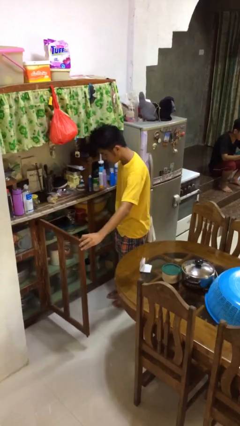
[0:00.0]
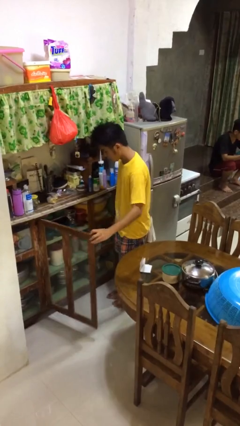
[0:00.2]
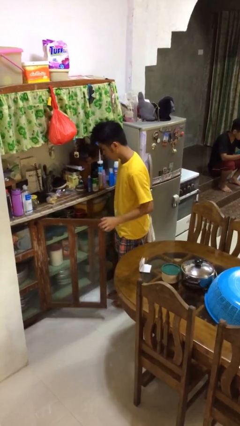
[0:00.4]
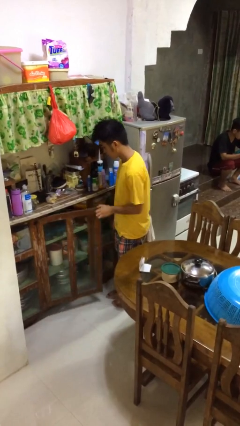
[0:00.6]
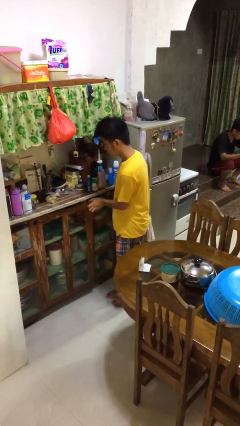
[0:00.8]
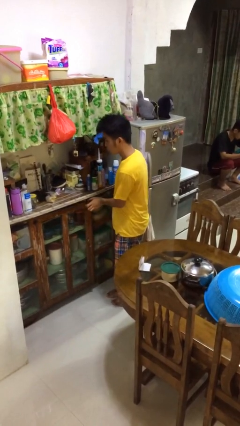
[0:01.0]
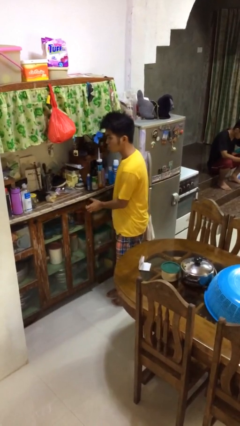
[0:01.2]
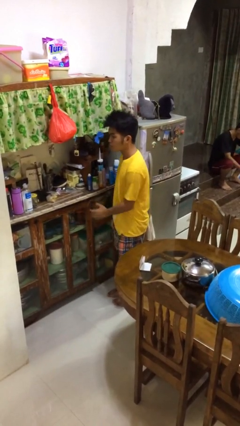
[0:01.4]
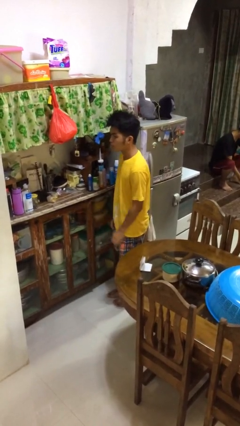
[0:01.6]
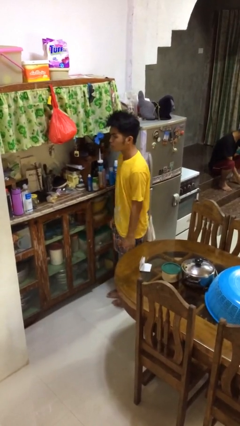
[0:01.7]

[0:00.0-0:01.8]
person closes cabinet

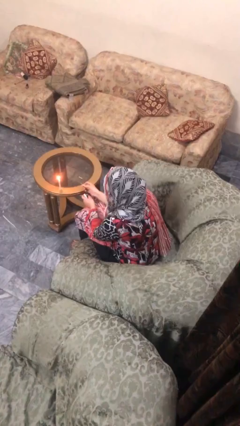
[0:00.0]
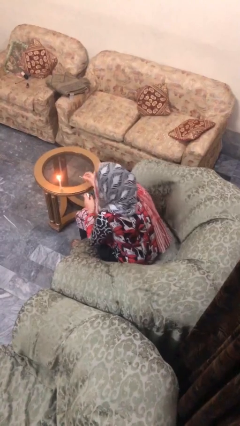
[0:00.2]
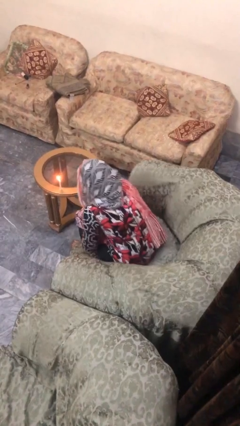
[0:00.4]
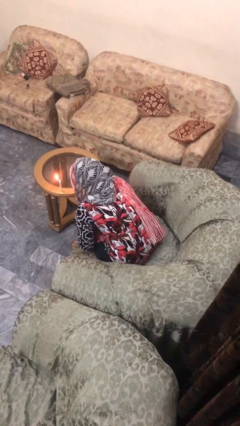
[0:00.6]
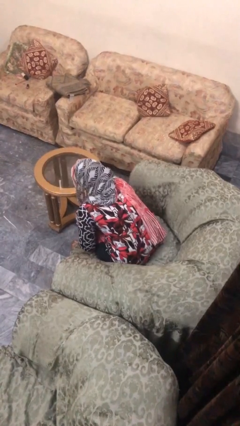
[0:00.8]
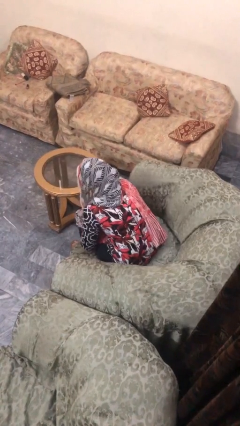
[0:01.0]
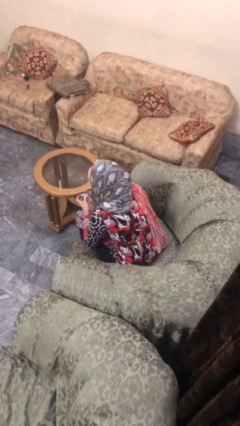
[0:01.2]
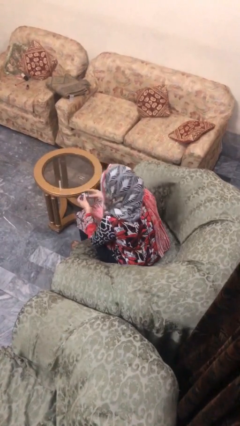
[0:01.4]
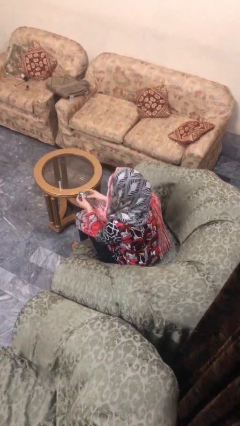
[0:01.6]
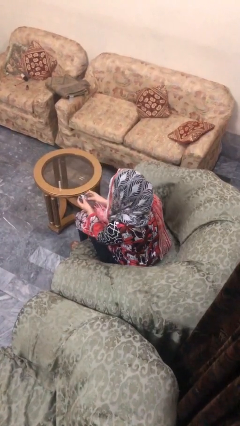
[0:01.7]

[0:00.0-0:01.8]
person extinguishes candle

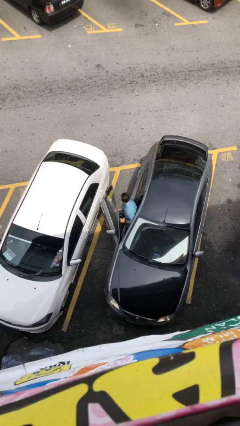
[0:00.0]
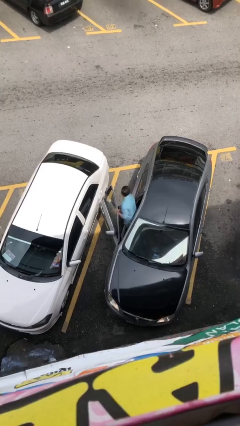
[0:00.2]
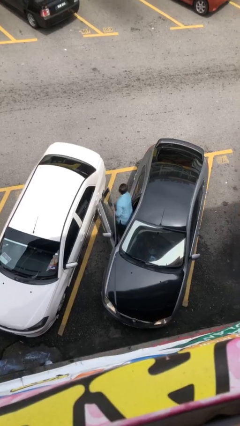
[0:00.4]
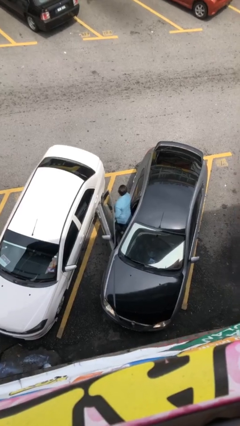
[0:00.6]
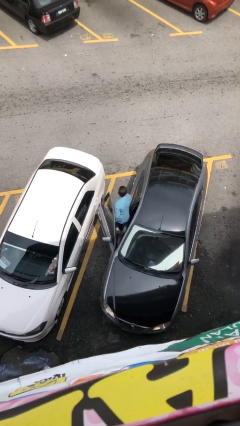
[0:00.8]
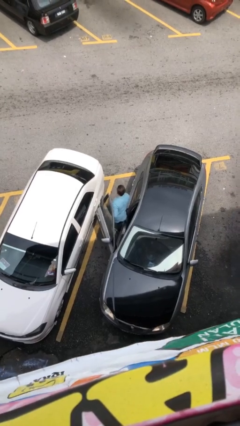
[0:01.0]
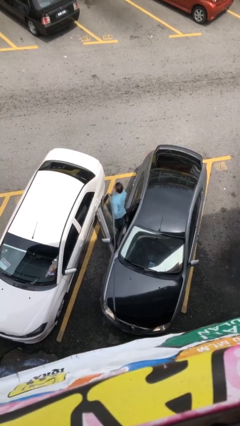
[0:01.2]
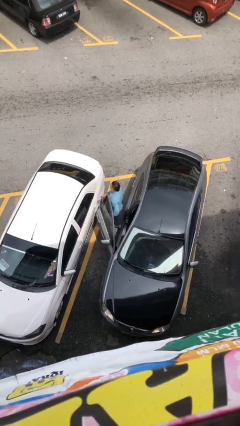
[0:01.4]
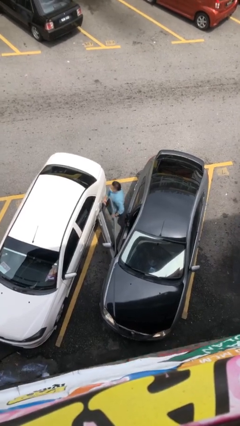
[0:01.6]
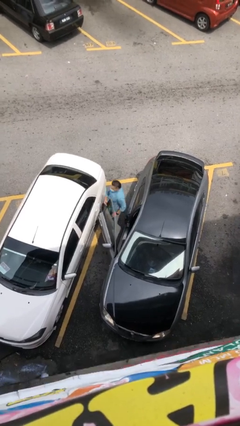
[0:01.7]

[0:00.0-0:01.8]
person exits car

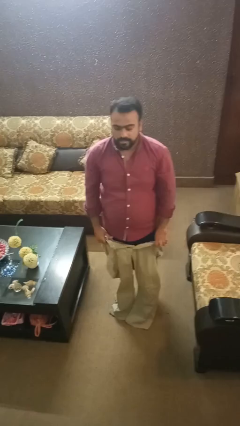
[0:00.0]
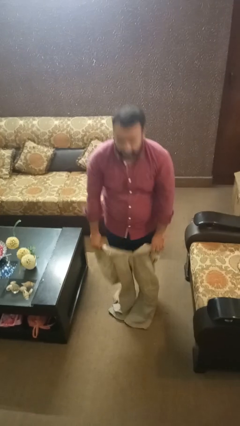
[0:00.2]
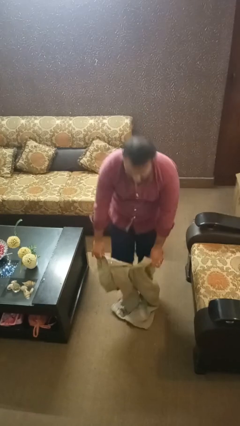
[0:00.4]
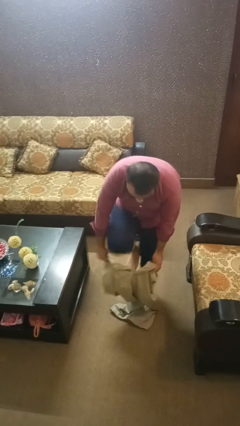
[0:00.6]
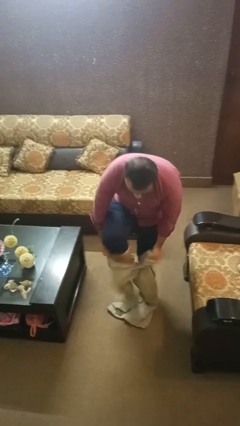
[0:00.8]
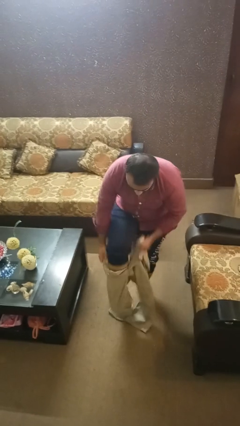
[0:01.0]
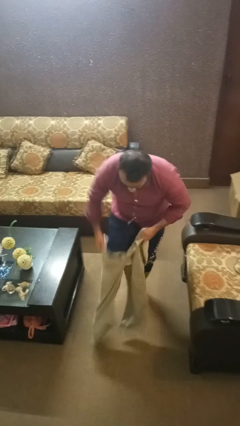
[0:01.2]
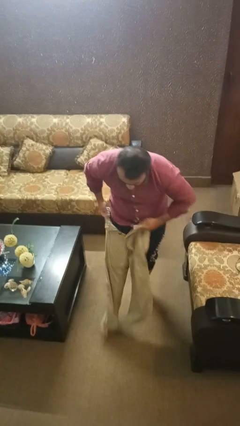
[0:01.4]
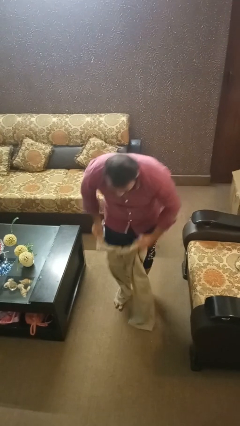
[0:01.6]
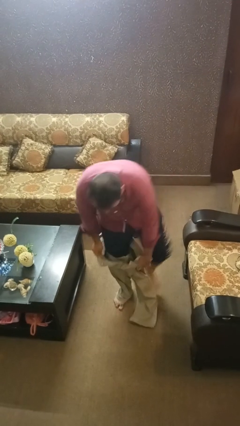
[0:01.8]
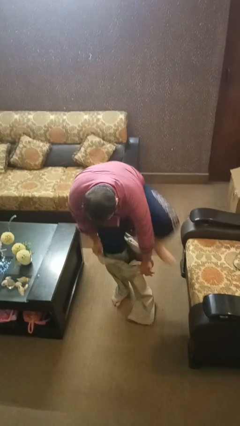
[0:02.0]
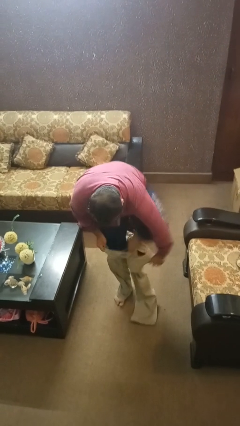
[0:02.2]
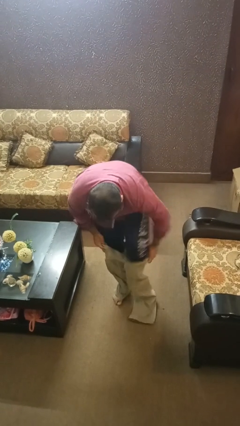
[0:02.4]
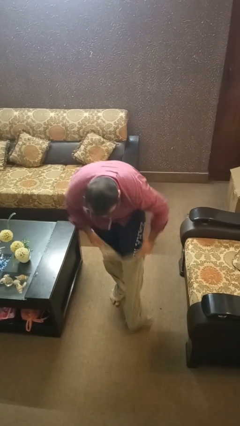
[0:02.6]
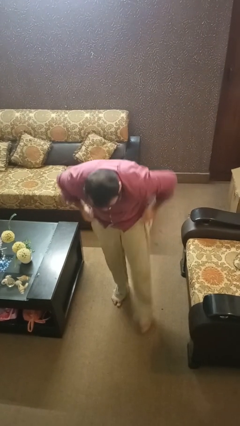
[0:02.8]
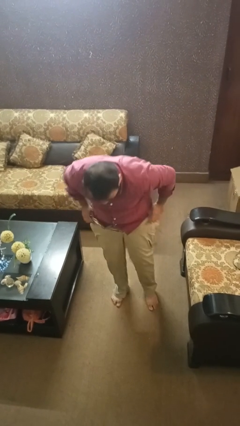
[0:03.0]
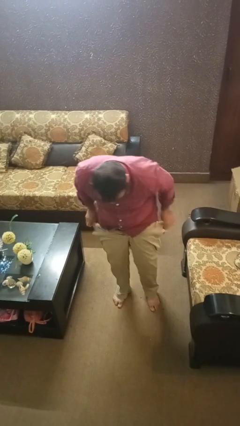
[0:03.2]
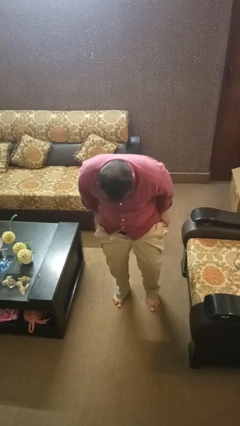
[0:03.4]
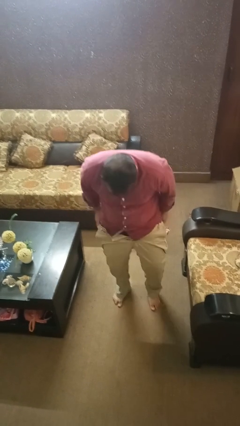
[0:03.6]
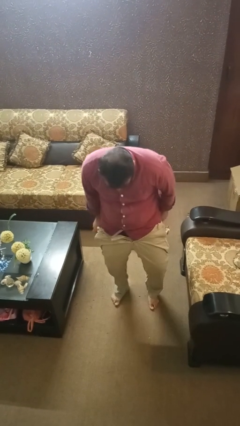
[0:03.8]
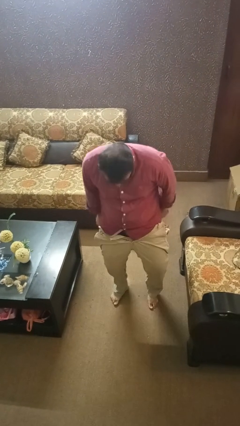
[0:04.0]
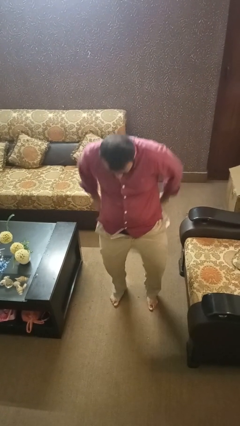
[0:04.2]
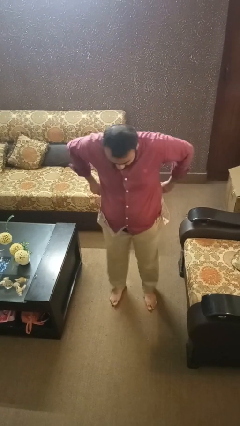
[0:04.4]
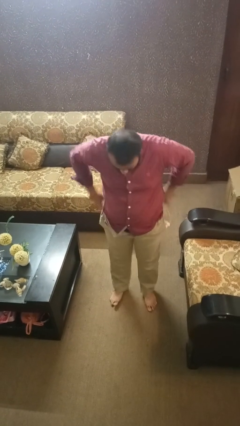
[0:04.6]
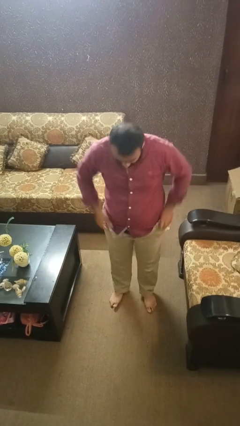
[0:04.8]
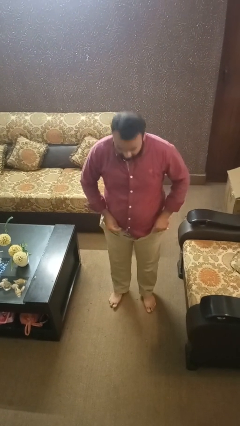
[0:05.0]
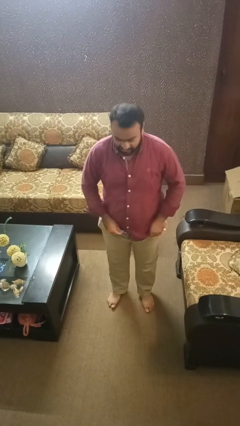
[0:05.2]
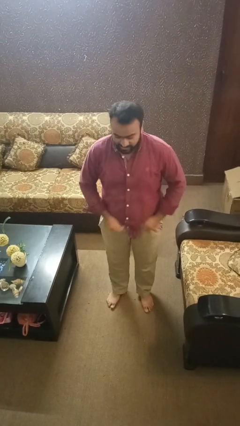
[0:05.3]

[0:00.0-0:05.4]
person puts on pants

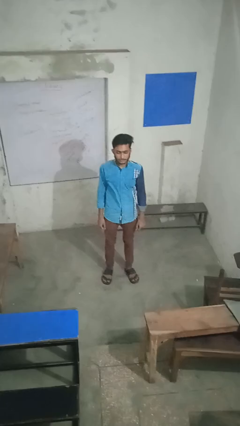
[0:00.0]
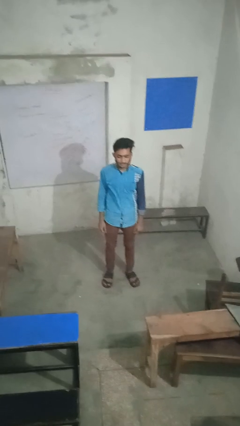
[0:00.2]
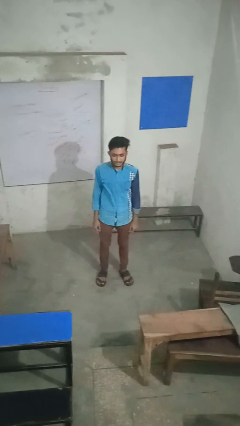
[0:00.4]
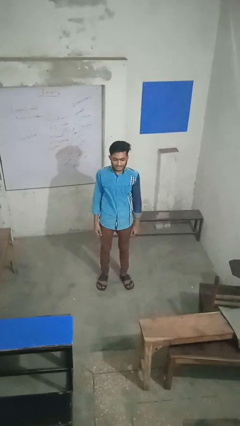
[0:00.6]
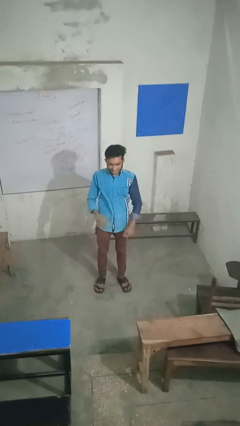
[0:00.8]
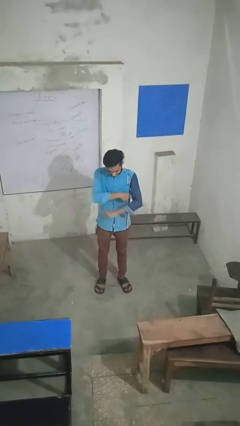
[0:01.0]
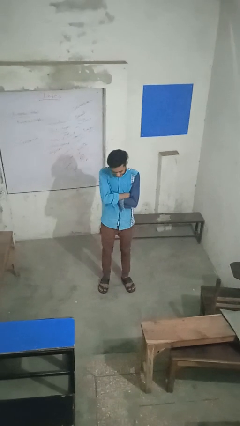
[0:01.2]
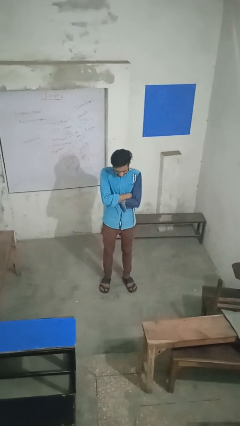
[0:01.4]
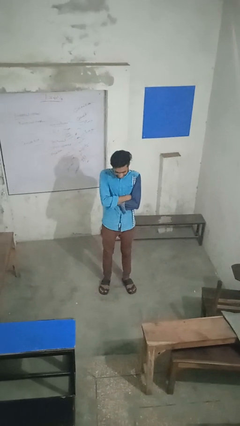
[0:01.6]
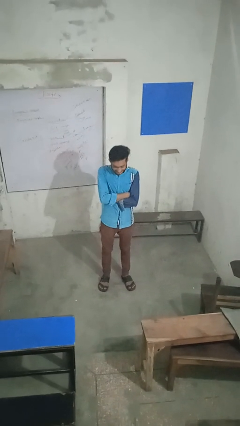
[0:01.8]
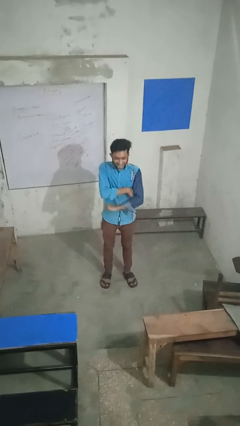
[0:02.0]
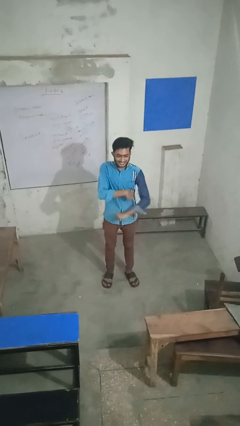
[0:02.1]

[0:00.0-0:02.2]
person crosses arms

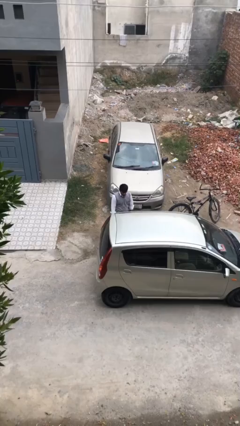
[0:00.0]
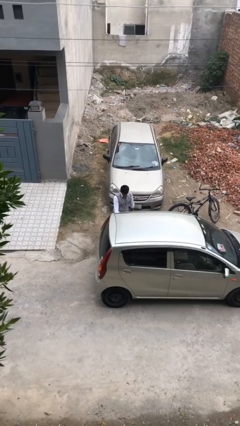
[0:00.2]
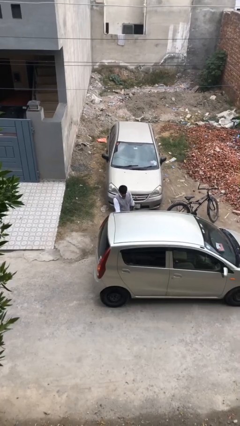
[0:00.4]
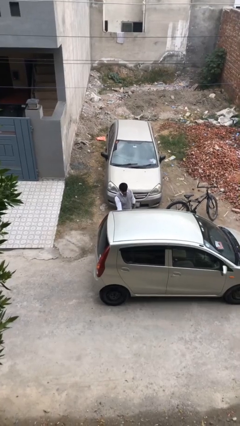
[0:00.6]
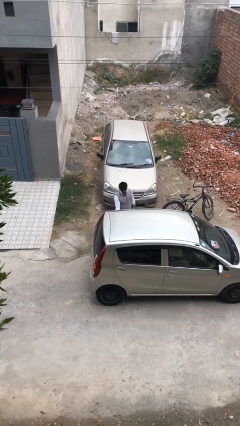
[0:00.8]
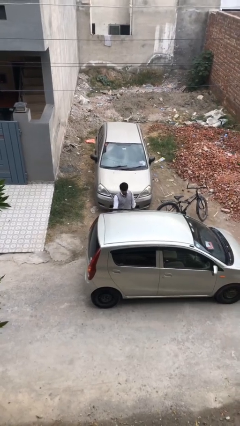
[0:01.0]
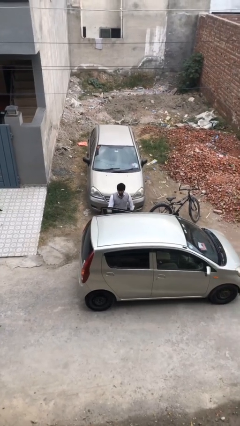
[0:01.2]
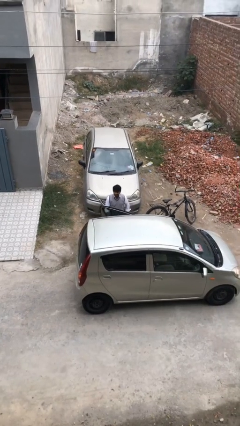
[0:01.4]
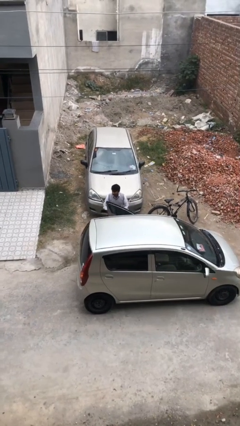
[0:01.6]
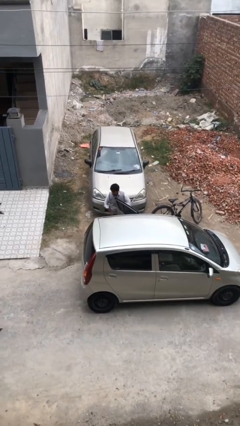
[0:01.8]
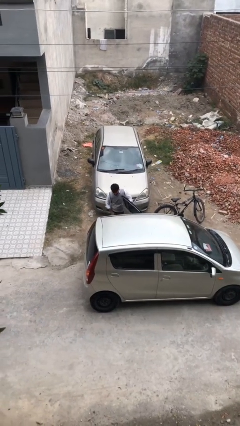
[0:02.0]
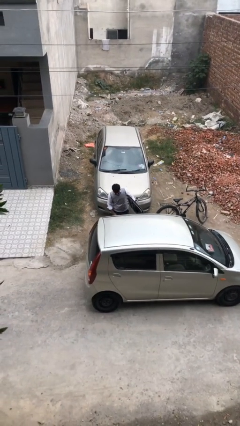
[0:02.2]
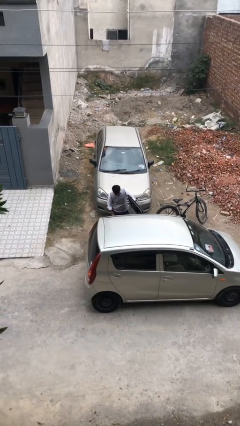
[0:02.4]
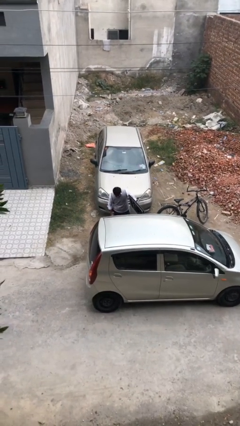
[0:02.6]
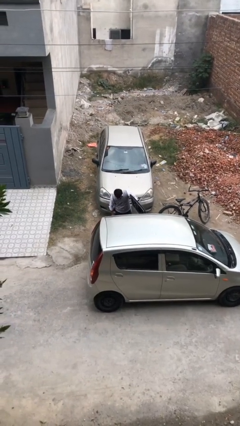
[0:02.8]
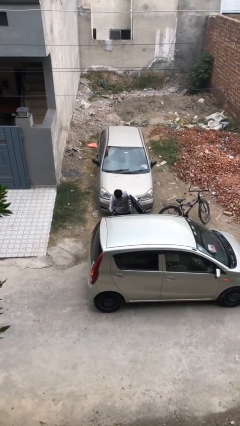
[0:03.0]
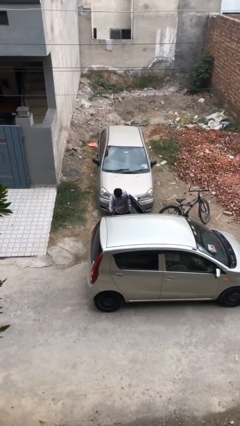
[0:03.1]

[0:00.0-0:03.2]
person opens car door

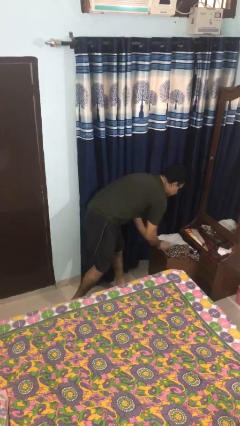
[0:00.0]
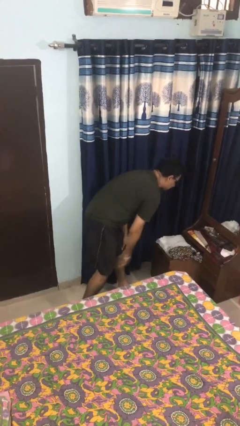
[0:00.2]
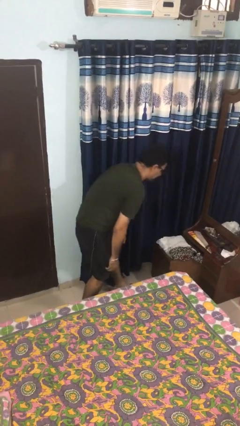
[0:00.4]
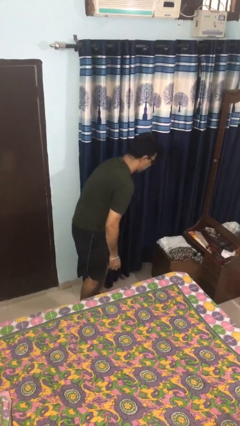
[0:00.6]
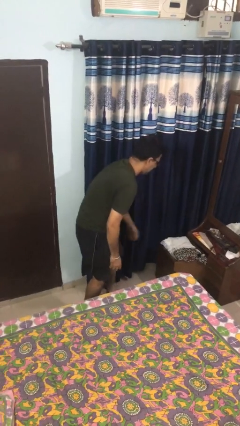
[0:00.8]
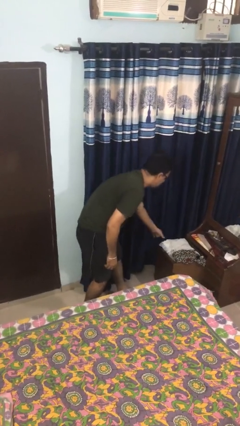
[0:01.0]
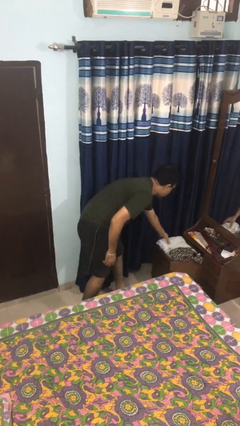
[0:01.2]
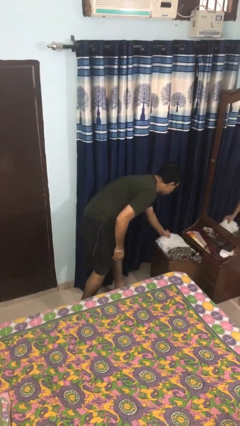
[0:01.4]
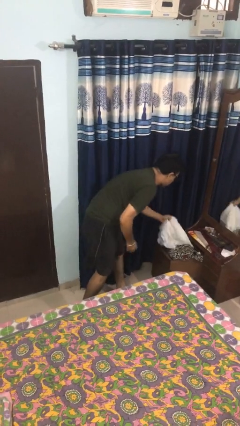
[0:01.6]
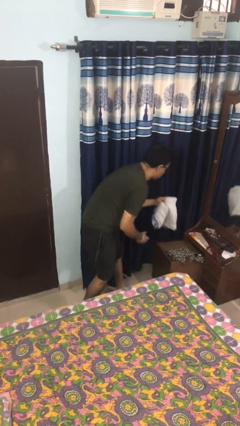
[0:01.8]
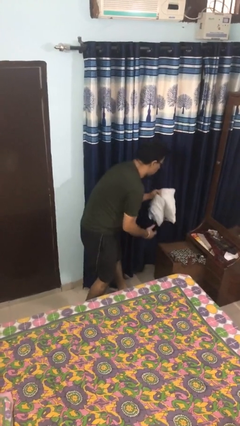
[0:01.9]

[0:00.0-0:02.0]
person takes clothes from dresser
